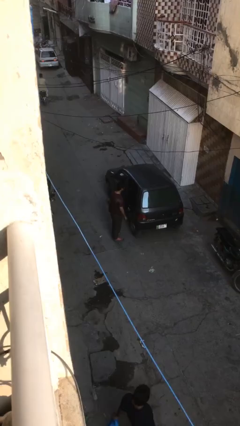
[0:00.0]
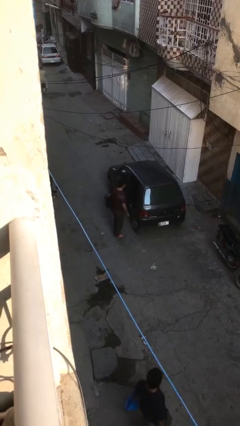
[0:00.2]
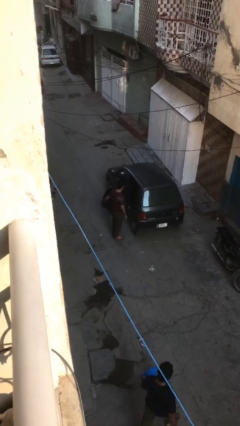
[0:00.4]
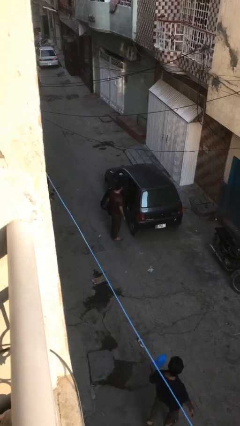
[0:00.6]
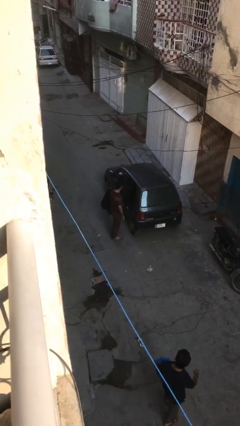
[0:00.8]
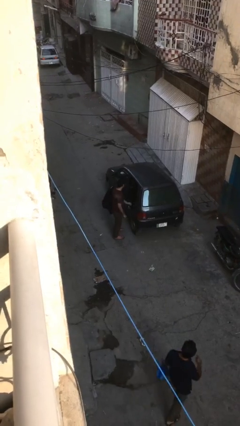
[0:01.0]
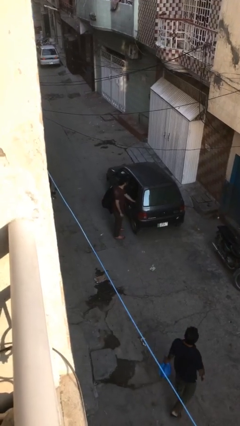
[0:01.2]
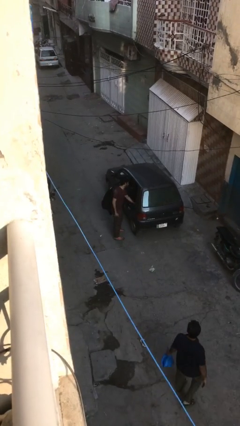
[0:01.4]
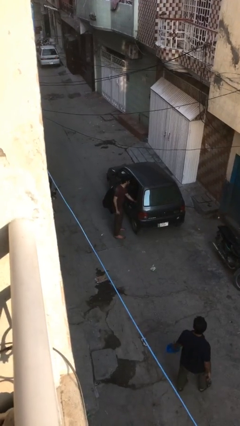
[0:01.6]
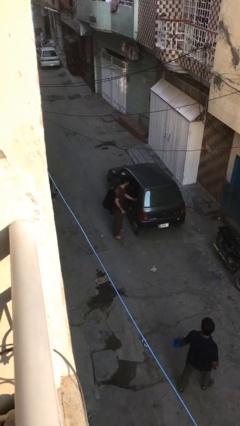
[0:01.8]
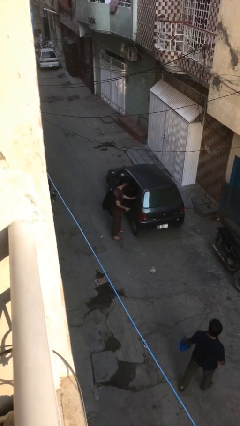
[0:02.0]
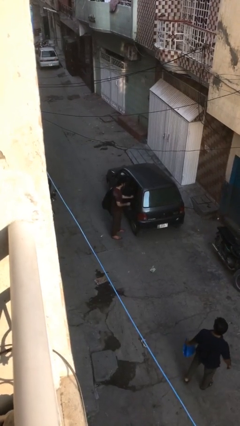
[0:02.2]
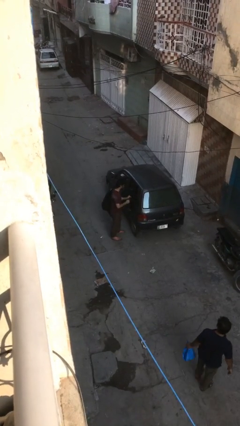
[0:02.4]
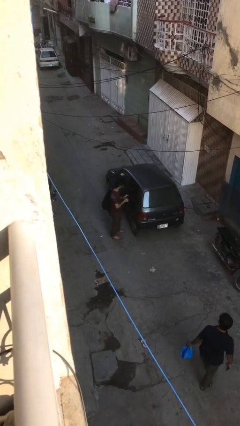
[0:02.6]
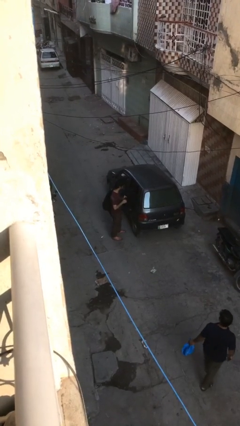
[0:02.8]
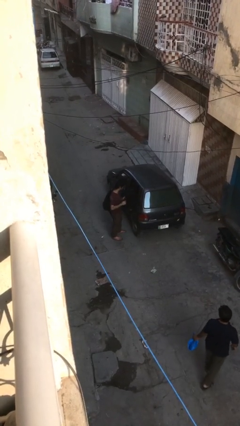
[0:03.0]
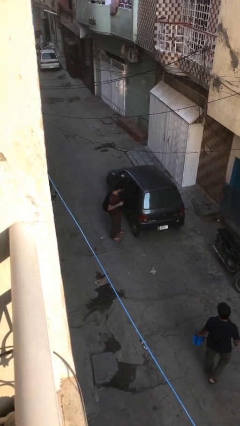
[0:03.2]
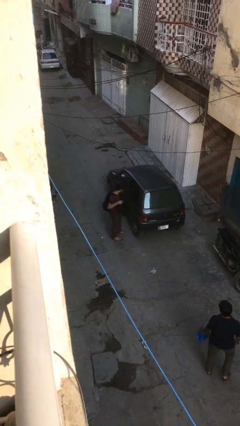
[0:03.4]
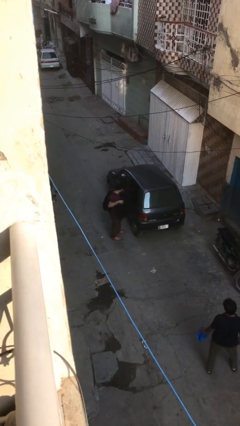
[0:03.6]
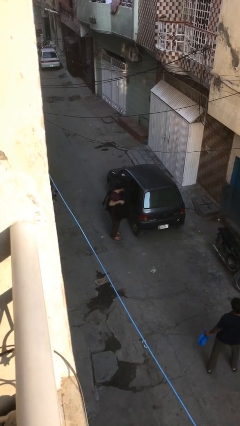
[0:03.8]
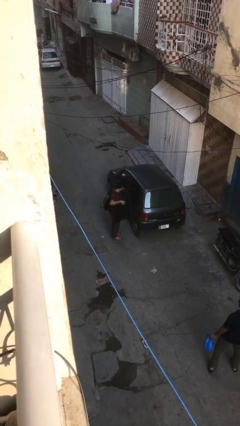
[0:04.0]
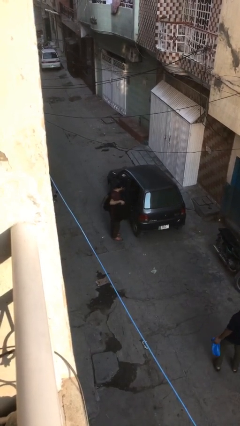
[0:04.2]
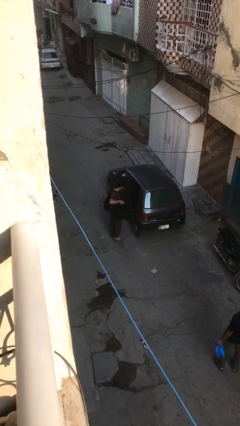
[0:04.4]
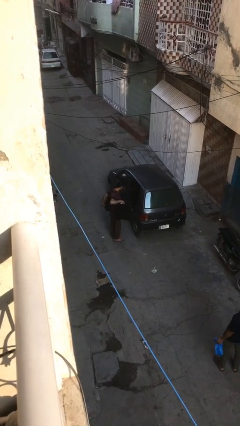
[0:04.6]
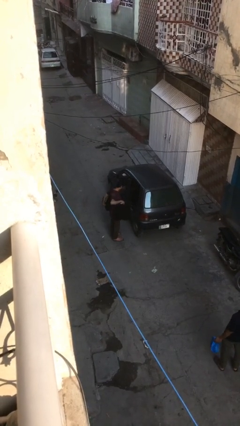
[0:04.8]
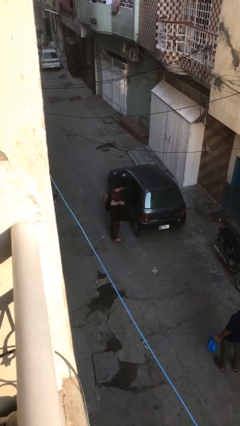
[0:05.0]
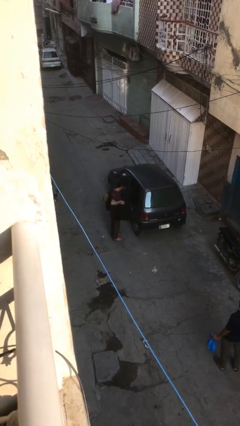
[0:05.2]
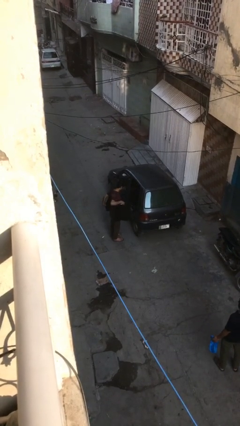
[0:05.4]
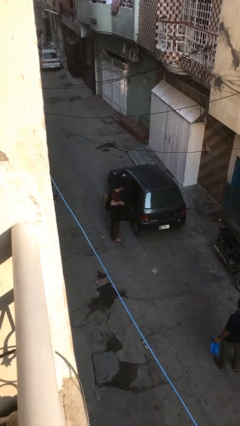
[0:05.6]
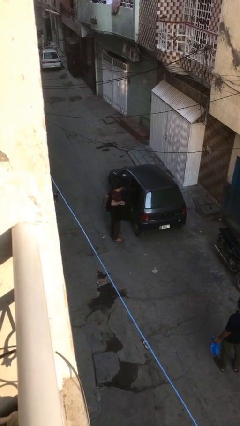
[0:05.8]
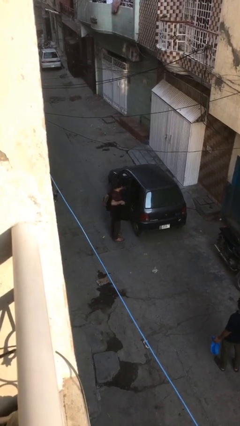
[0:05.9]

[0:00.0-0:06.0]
person unloads car

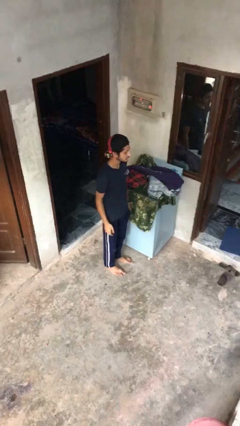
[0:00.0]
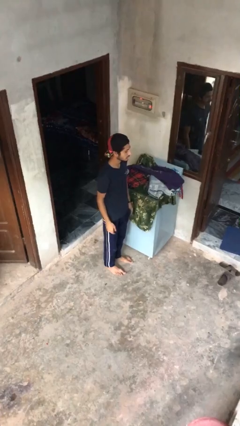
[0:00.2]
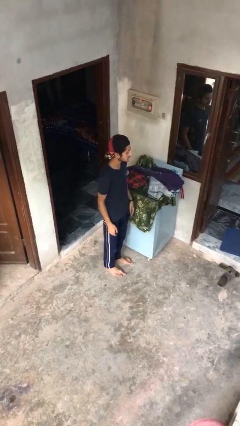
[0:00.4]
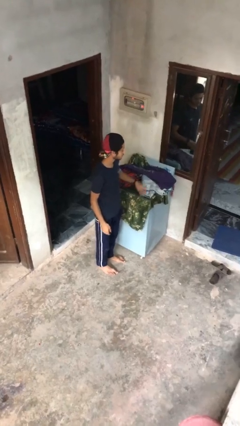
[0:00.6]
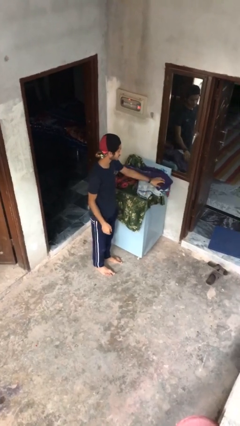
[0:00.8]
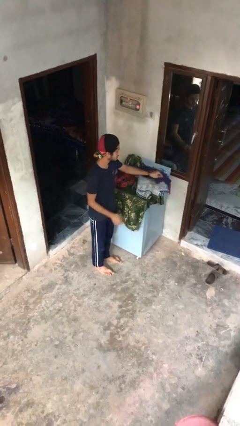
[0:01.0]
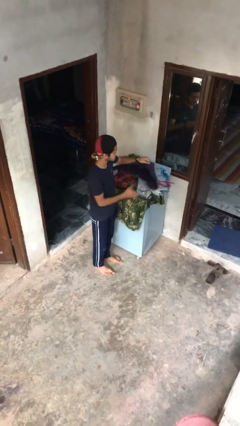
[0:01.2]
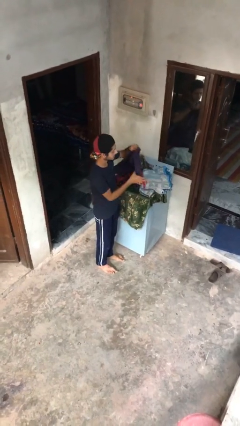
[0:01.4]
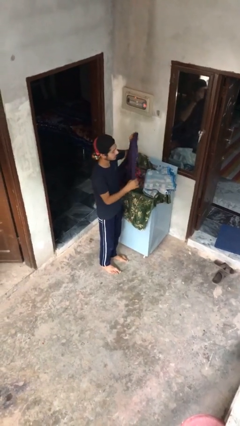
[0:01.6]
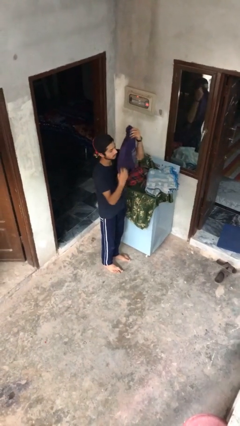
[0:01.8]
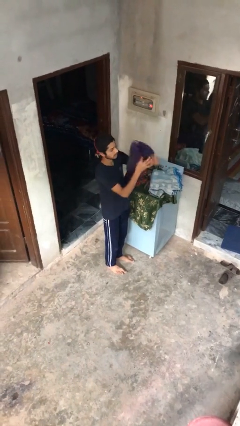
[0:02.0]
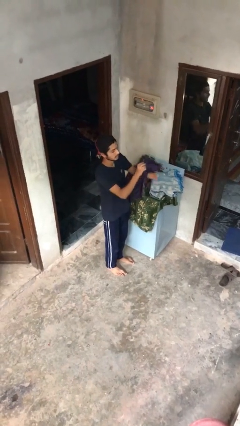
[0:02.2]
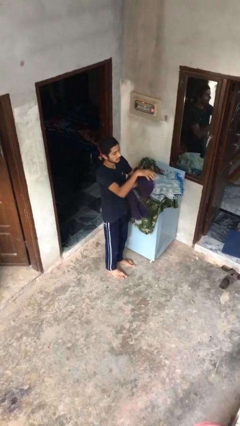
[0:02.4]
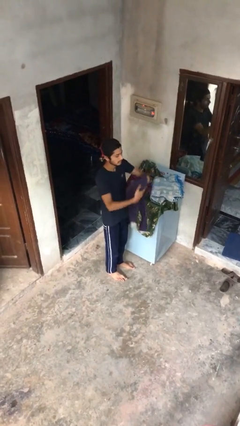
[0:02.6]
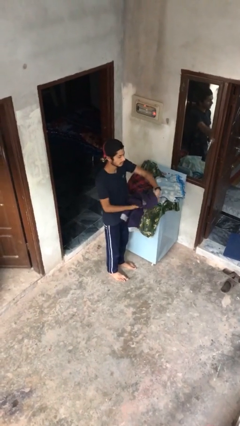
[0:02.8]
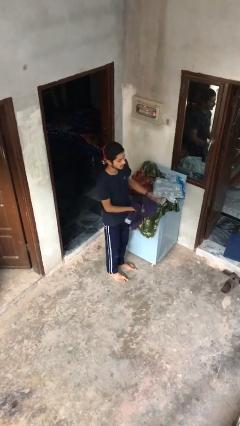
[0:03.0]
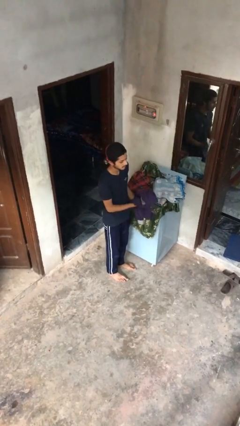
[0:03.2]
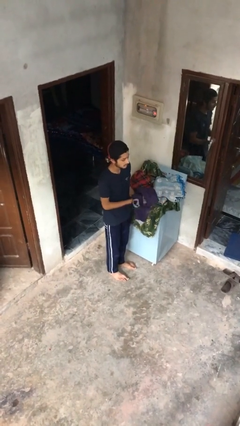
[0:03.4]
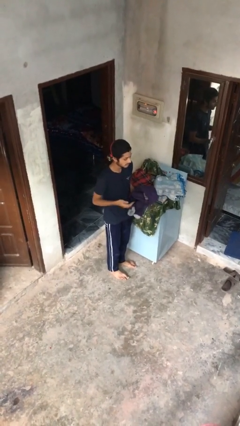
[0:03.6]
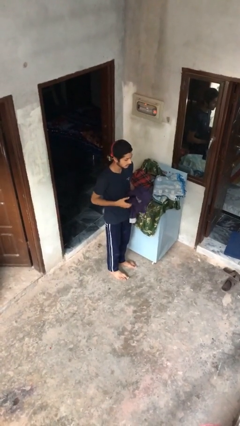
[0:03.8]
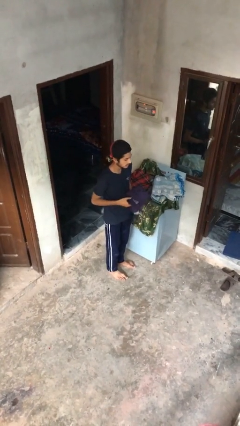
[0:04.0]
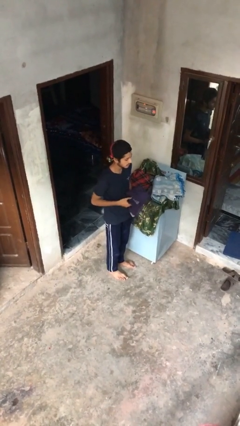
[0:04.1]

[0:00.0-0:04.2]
person folds pants

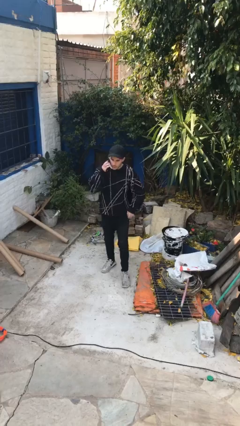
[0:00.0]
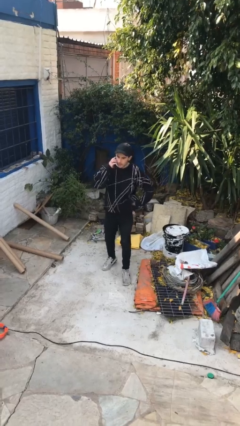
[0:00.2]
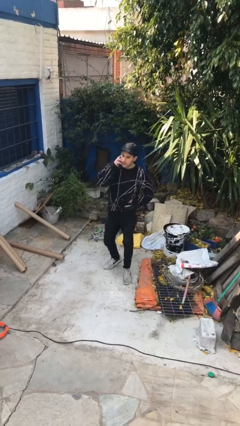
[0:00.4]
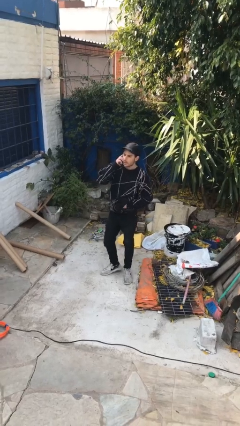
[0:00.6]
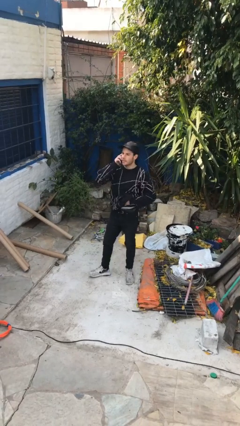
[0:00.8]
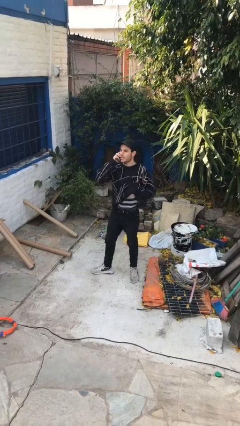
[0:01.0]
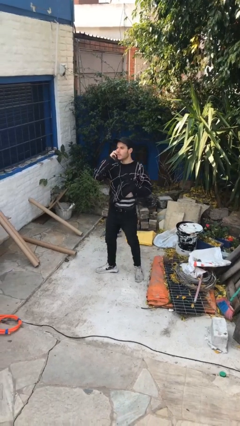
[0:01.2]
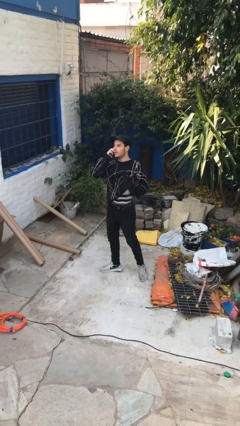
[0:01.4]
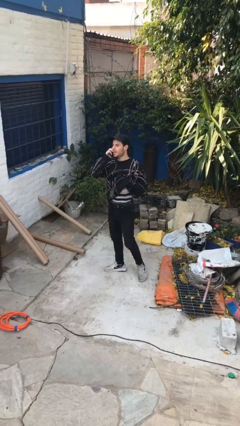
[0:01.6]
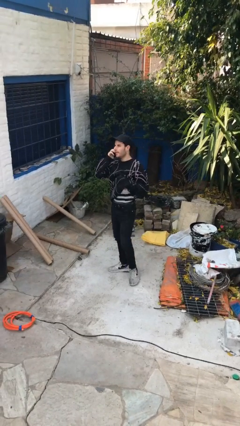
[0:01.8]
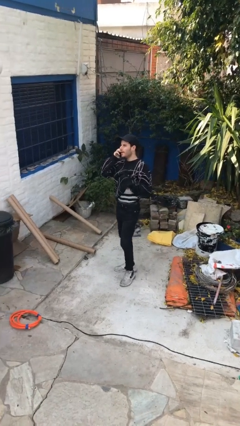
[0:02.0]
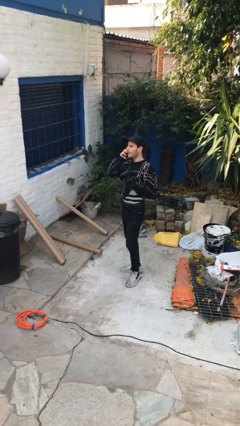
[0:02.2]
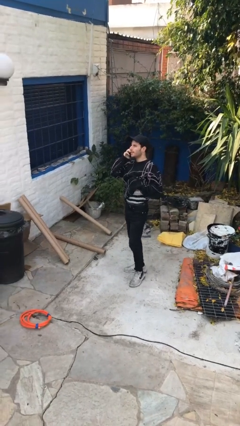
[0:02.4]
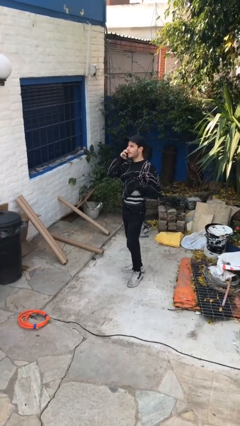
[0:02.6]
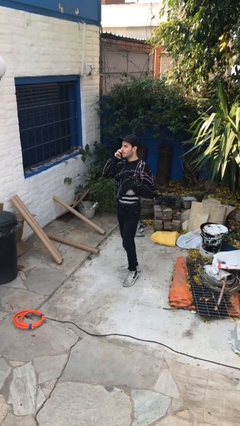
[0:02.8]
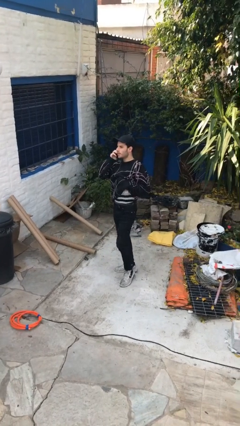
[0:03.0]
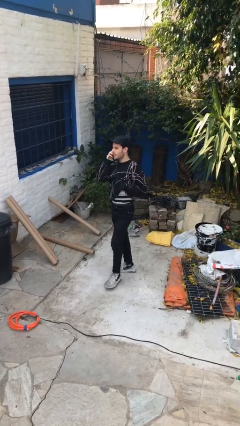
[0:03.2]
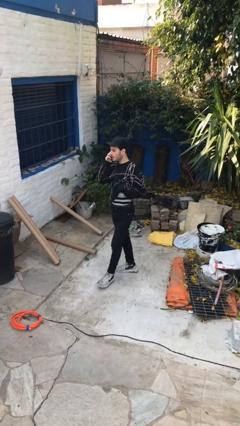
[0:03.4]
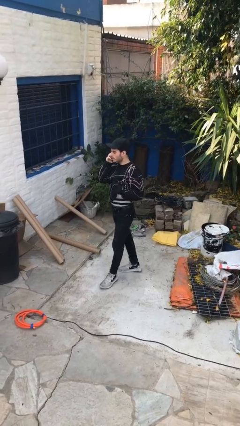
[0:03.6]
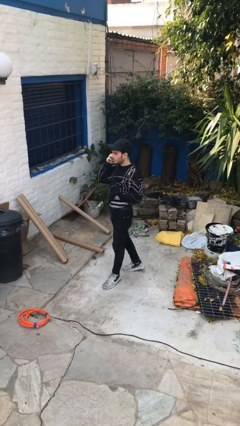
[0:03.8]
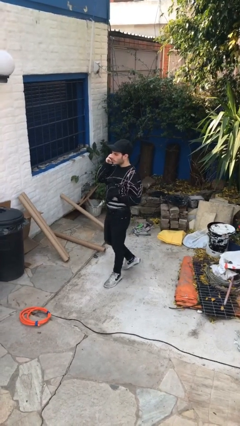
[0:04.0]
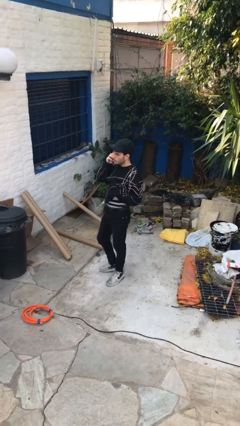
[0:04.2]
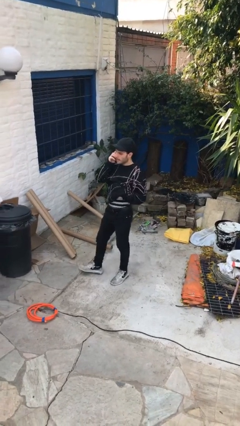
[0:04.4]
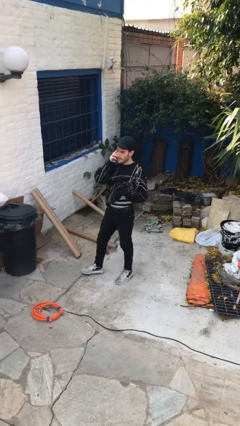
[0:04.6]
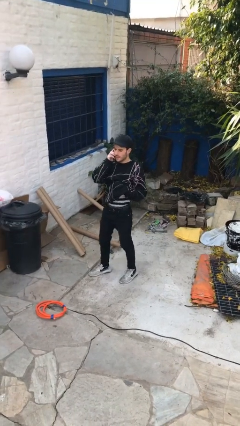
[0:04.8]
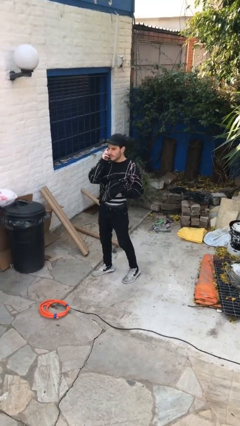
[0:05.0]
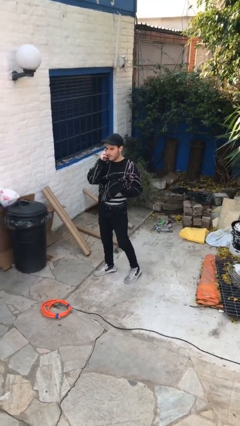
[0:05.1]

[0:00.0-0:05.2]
person talks on phone

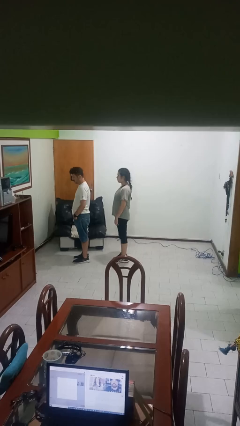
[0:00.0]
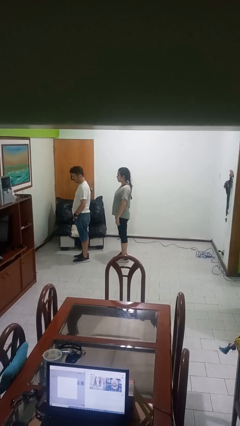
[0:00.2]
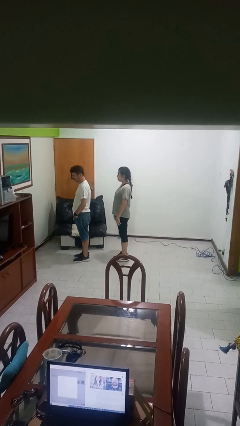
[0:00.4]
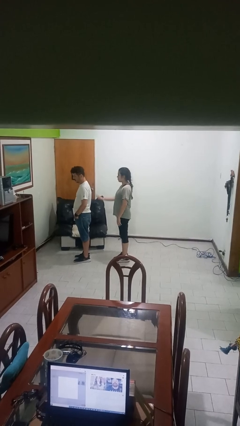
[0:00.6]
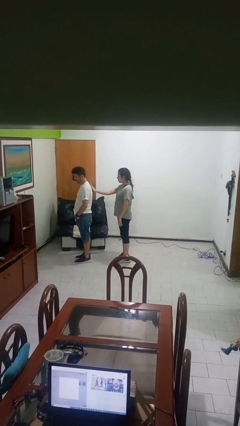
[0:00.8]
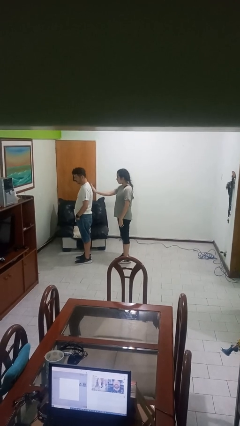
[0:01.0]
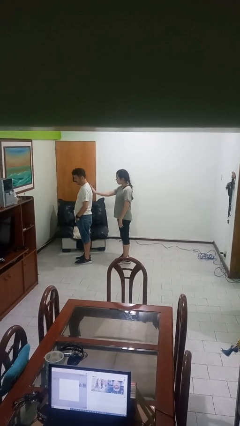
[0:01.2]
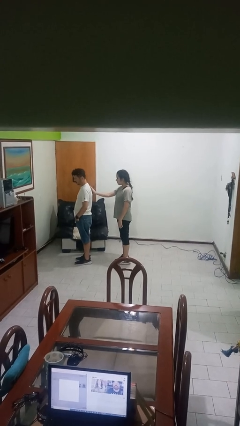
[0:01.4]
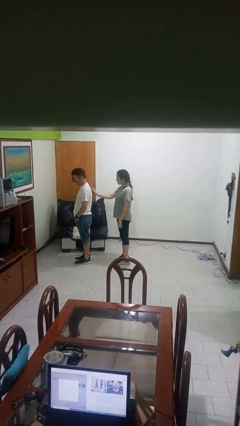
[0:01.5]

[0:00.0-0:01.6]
person touches back of person

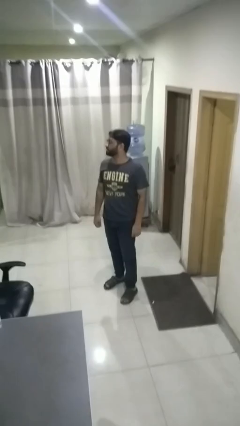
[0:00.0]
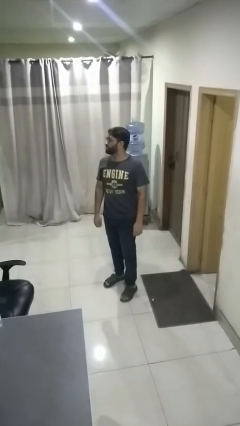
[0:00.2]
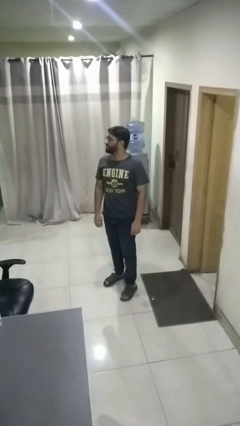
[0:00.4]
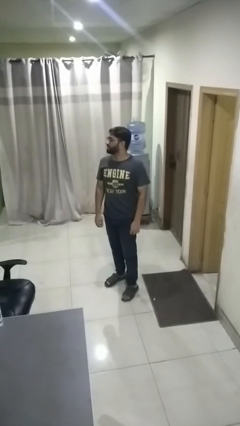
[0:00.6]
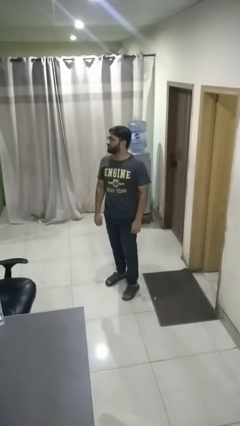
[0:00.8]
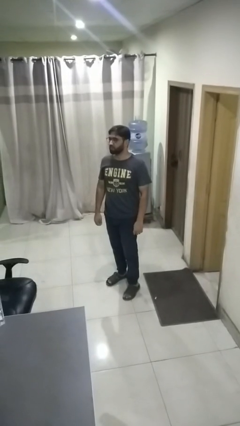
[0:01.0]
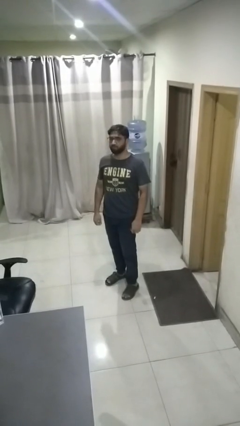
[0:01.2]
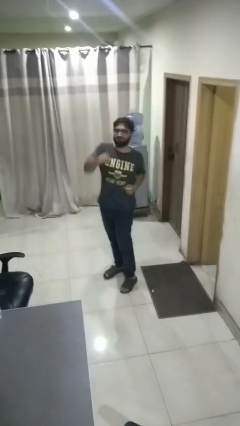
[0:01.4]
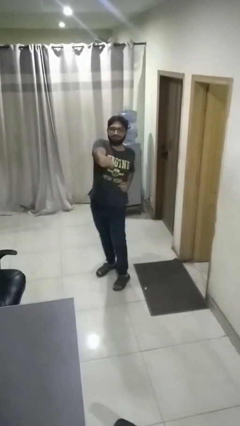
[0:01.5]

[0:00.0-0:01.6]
person punches
